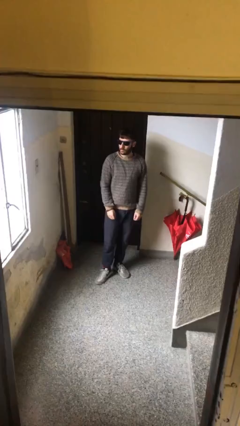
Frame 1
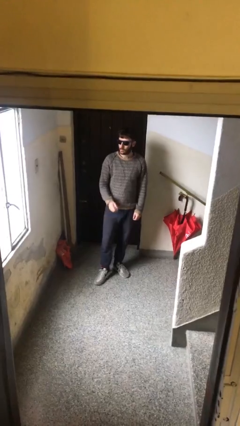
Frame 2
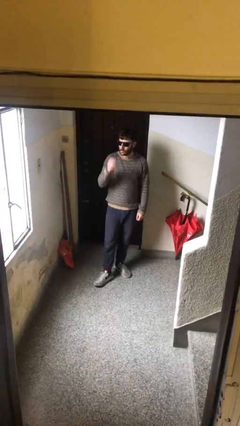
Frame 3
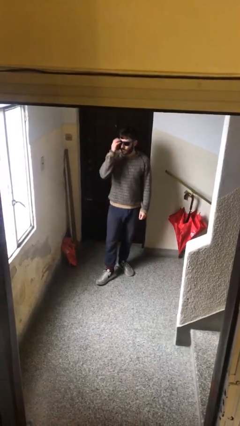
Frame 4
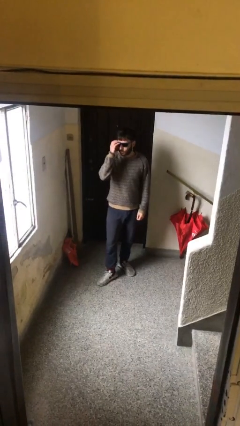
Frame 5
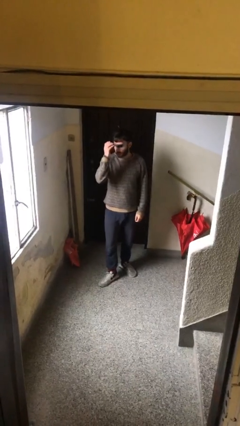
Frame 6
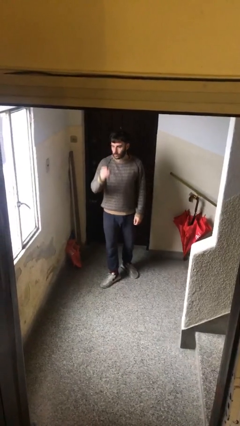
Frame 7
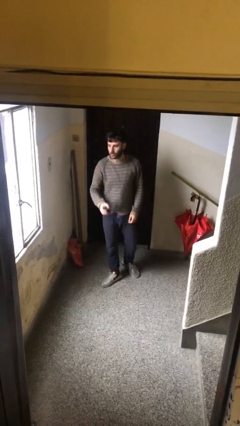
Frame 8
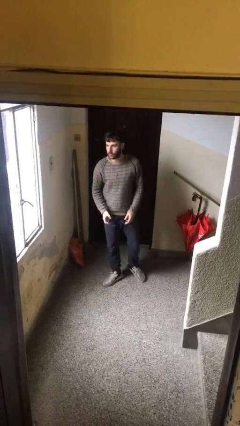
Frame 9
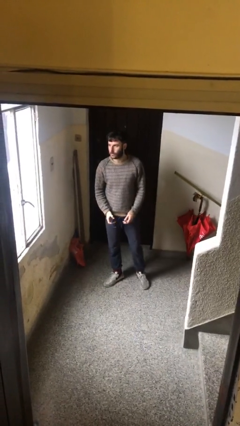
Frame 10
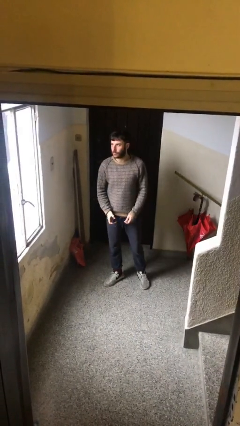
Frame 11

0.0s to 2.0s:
person takes off sunglasses

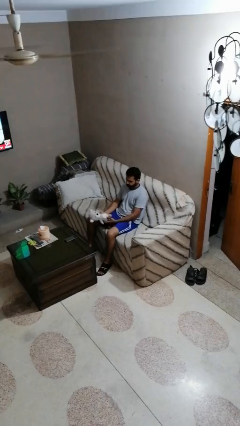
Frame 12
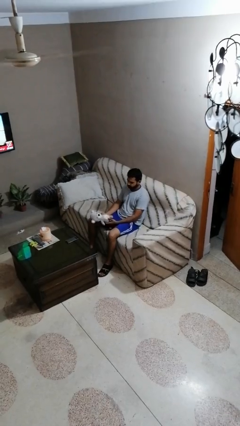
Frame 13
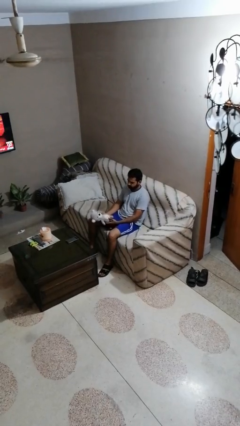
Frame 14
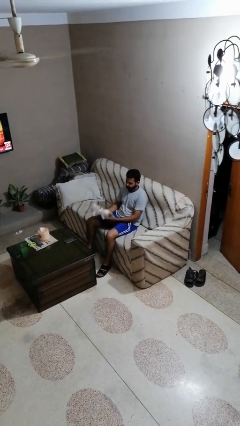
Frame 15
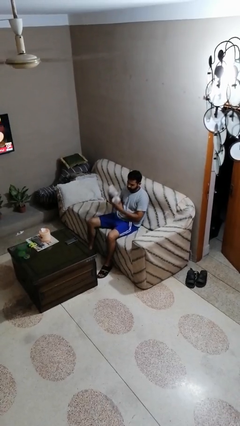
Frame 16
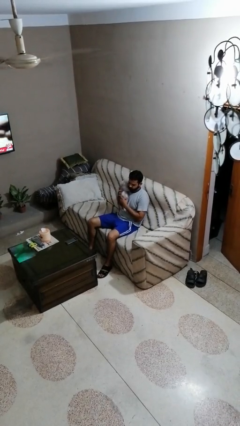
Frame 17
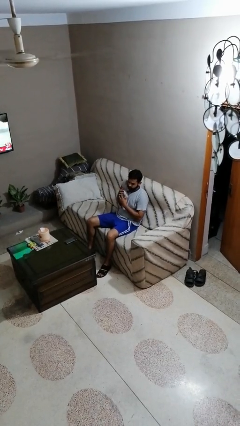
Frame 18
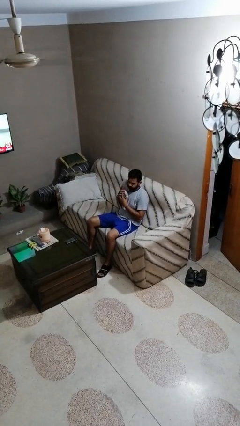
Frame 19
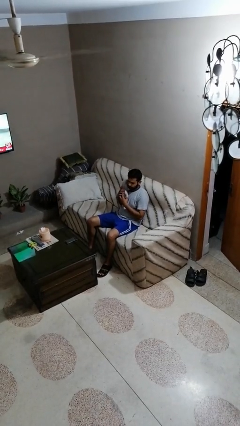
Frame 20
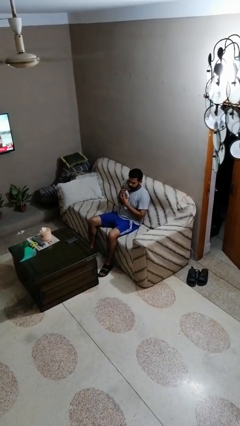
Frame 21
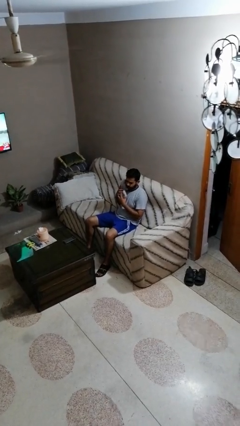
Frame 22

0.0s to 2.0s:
person hugs stuffed animal

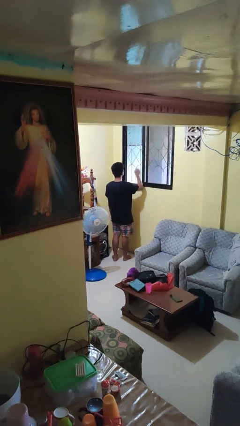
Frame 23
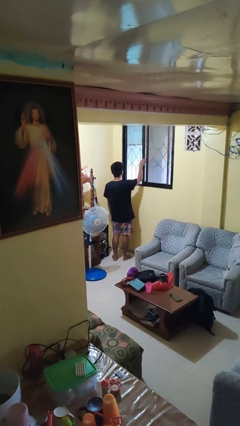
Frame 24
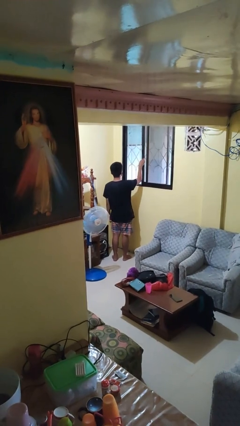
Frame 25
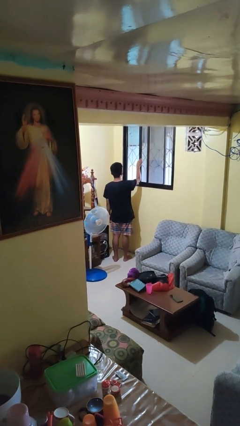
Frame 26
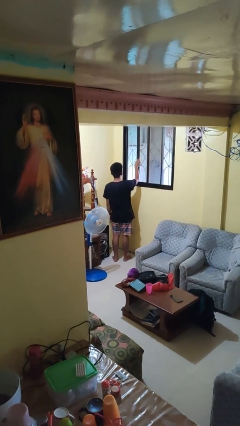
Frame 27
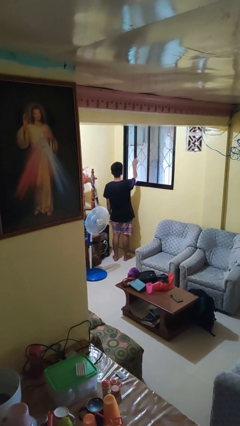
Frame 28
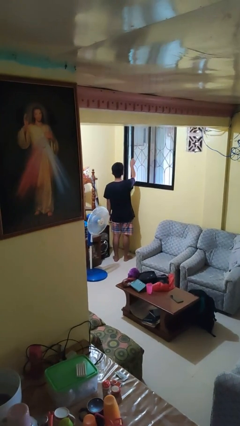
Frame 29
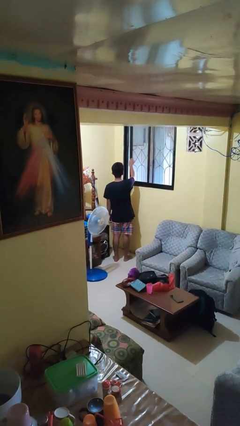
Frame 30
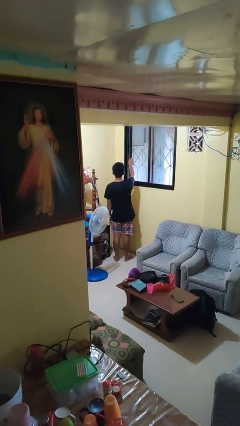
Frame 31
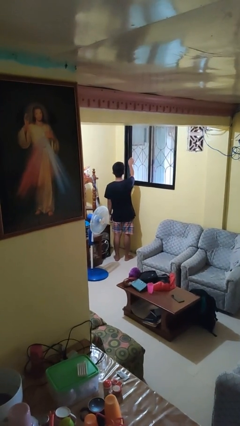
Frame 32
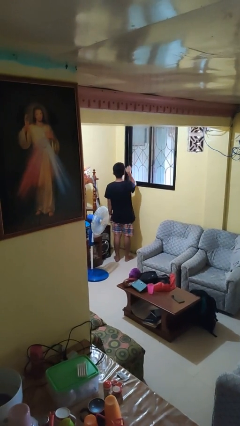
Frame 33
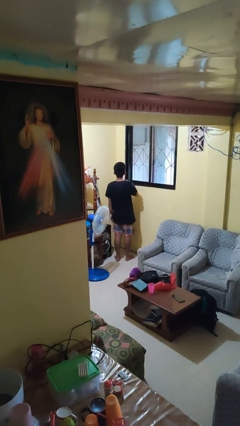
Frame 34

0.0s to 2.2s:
person closes home window

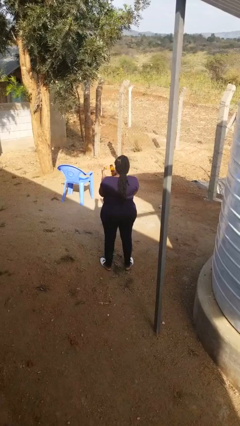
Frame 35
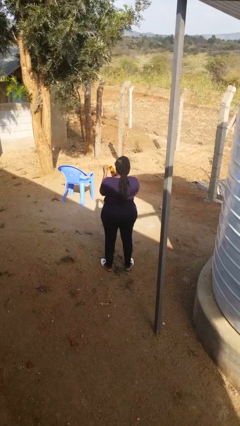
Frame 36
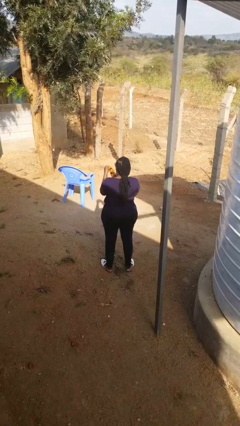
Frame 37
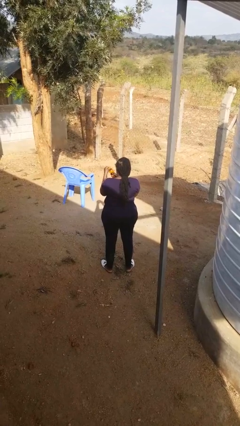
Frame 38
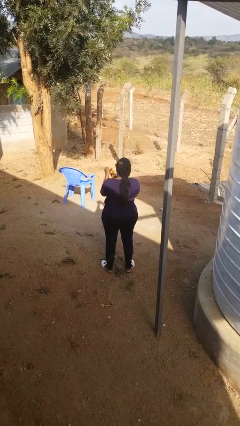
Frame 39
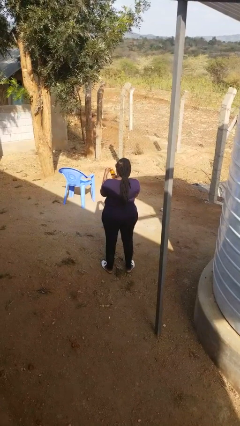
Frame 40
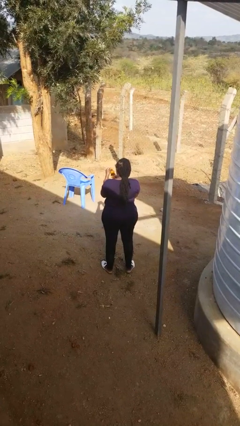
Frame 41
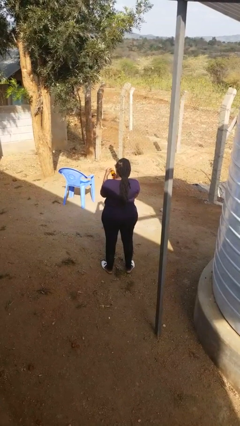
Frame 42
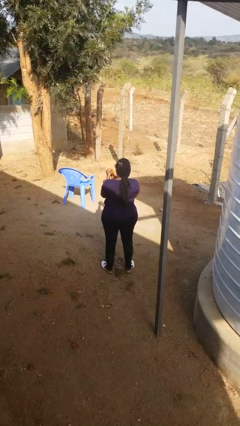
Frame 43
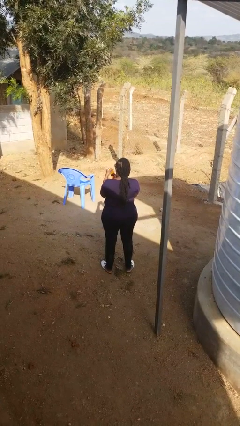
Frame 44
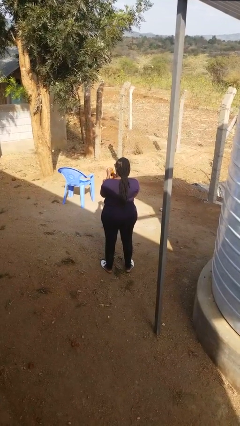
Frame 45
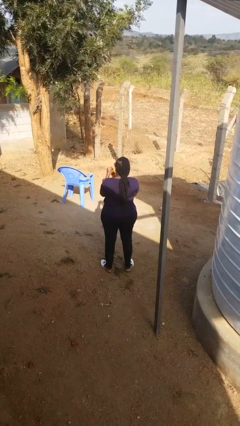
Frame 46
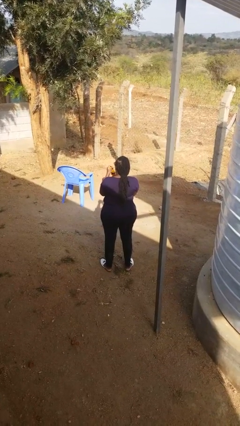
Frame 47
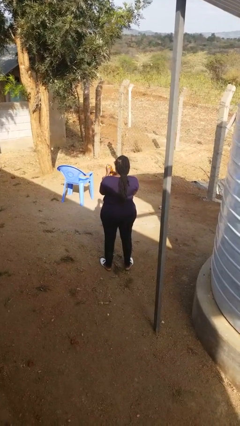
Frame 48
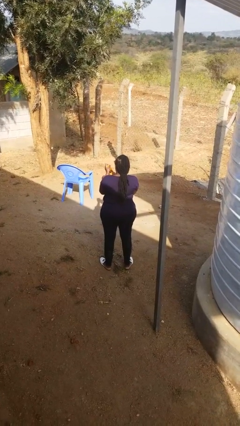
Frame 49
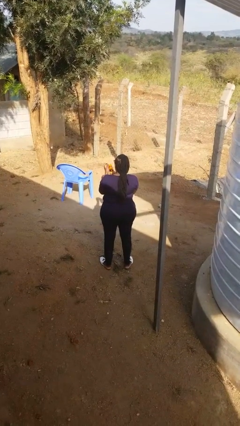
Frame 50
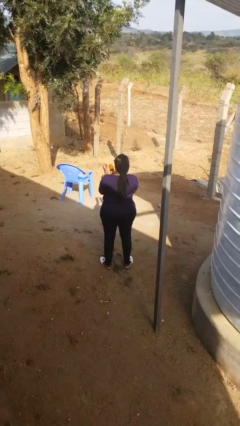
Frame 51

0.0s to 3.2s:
person closes jar

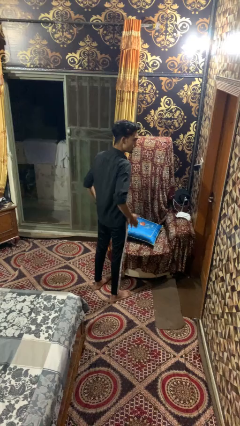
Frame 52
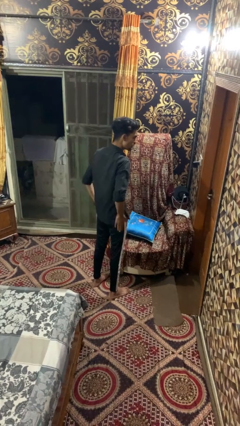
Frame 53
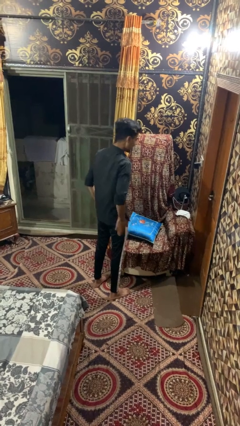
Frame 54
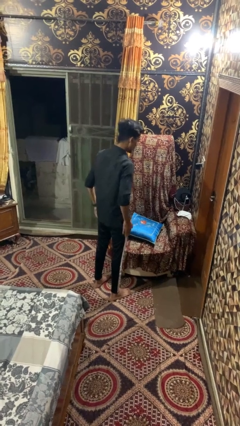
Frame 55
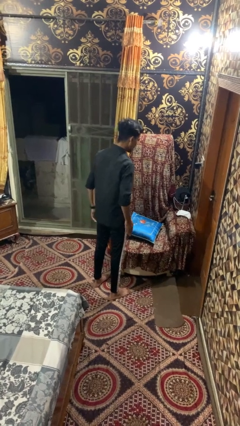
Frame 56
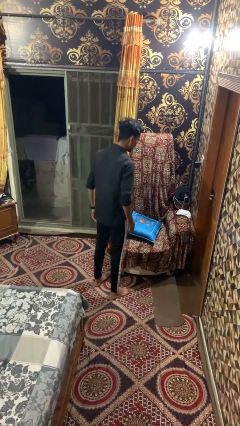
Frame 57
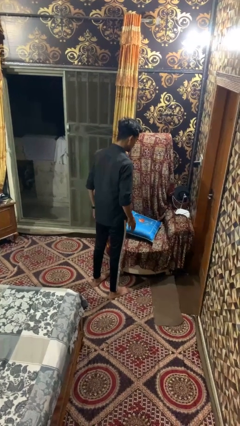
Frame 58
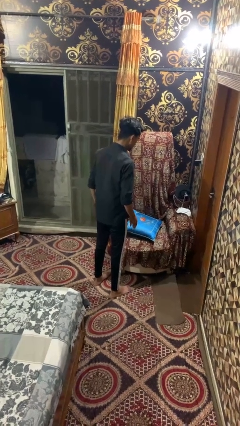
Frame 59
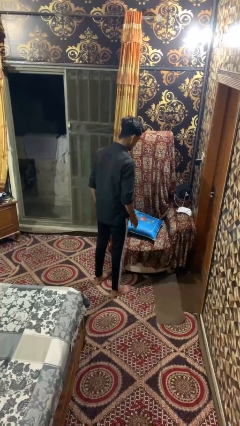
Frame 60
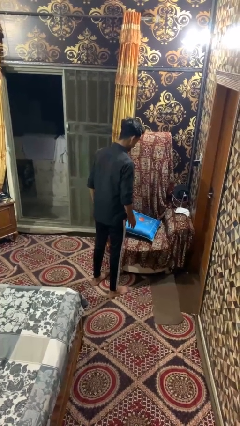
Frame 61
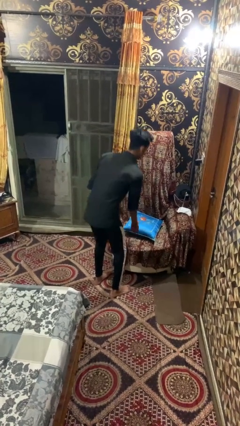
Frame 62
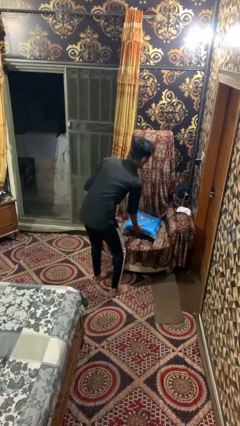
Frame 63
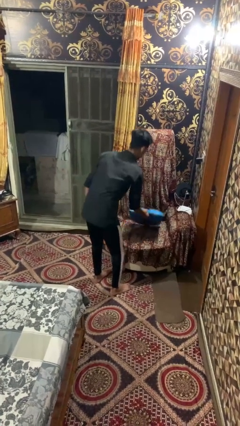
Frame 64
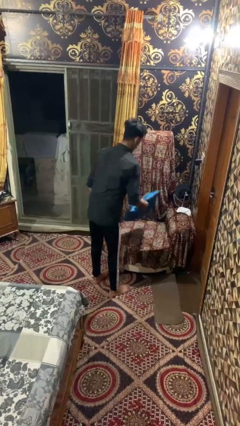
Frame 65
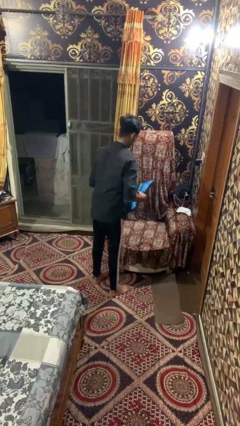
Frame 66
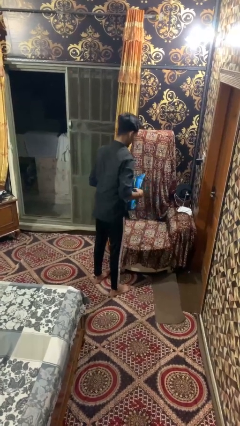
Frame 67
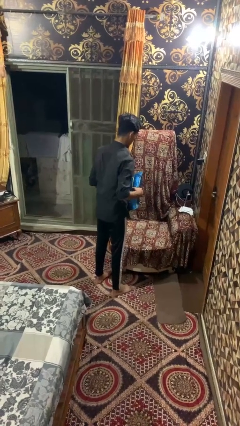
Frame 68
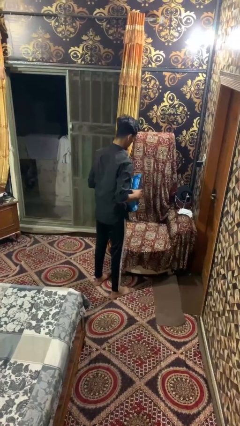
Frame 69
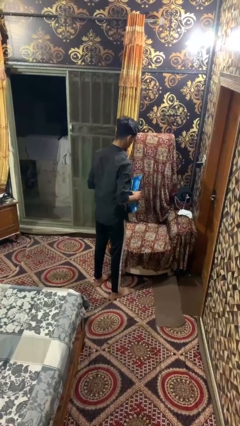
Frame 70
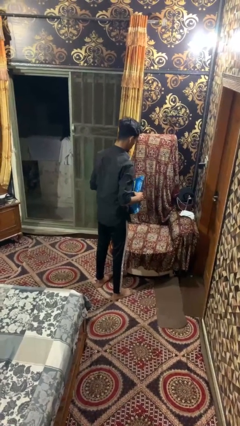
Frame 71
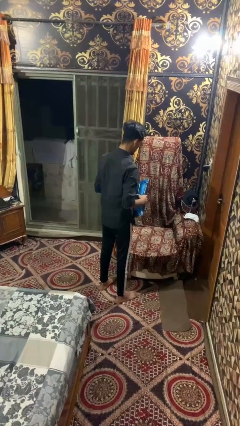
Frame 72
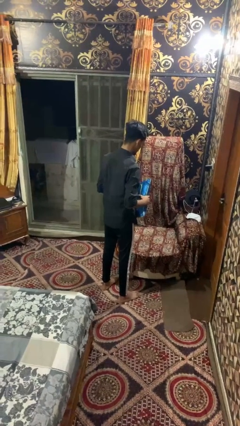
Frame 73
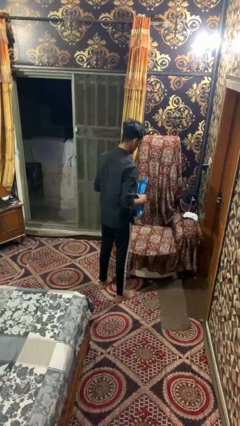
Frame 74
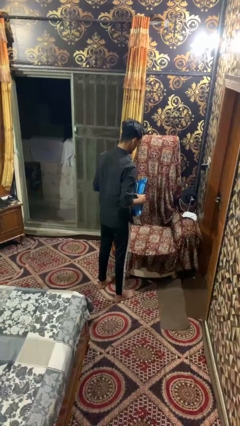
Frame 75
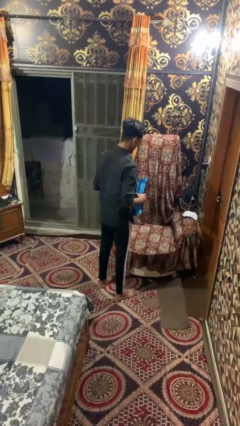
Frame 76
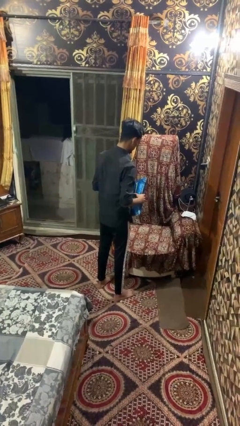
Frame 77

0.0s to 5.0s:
person picks up object from couch

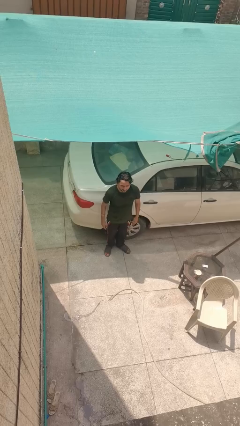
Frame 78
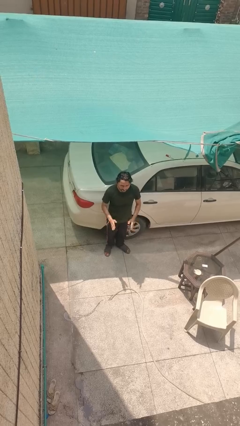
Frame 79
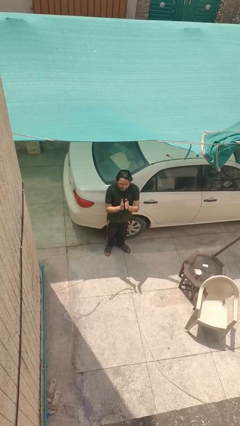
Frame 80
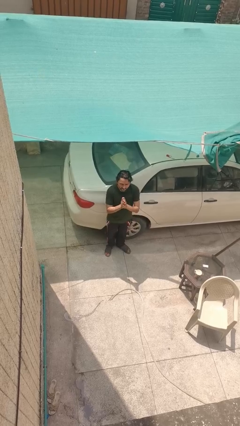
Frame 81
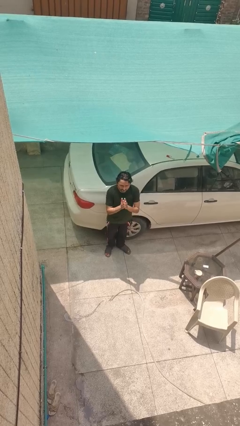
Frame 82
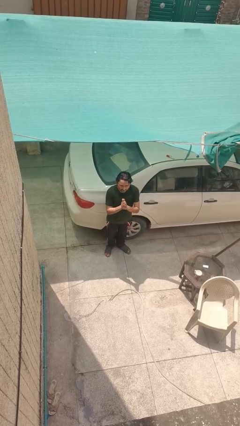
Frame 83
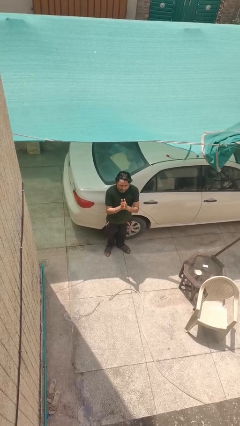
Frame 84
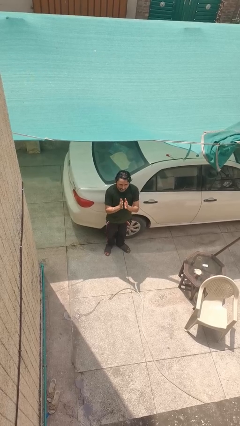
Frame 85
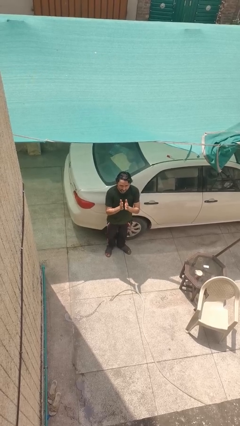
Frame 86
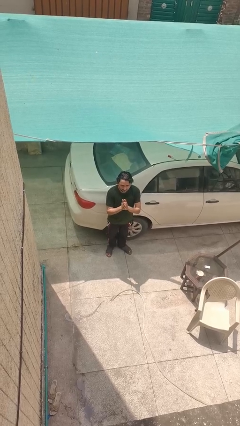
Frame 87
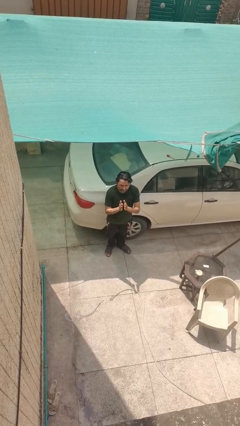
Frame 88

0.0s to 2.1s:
person claps hands

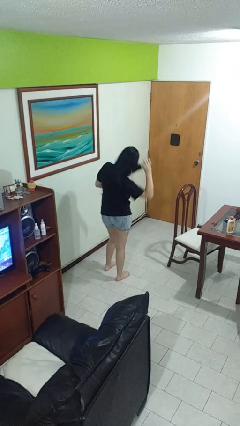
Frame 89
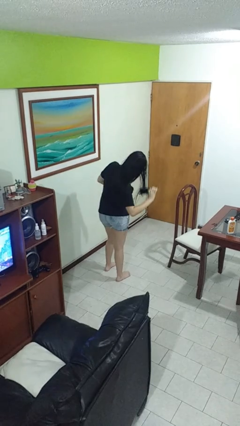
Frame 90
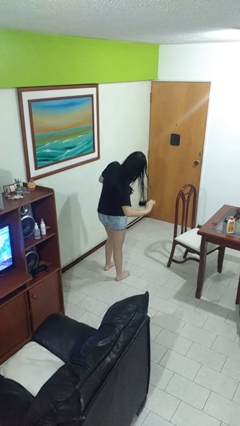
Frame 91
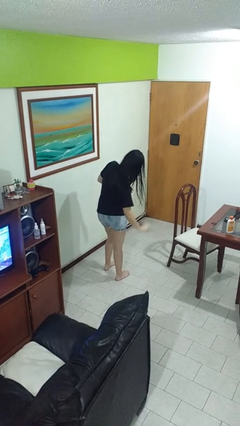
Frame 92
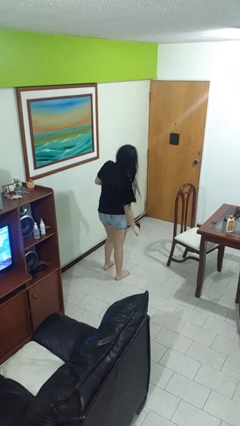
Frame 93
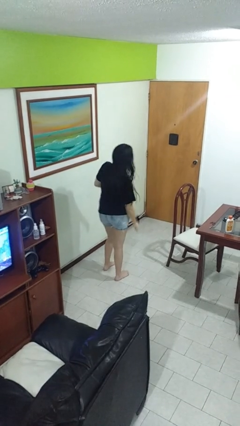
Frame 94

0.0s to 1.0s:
person brushes hair
